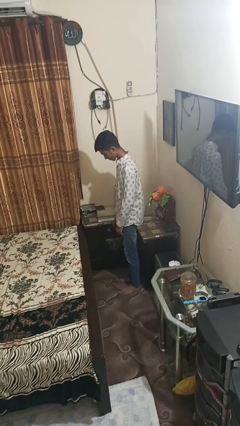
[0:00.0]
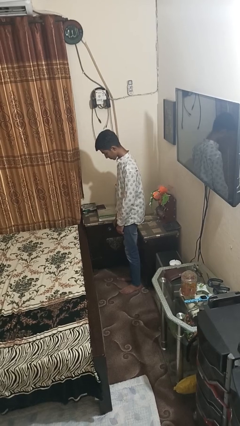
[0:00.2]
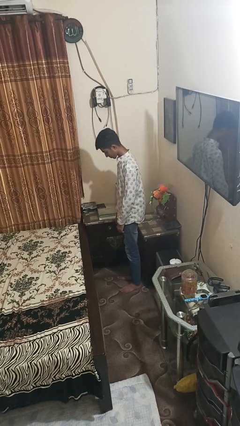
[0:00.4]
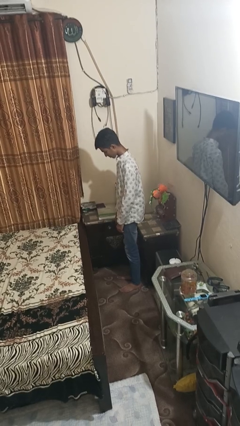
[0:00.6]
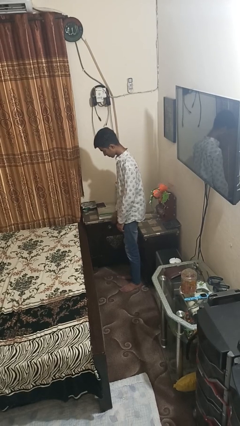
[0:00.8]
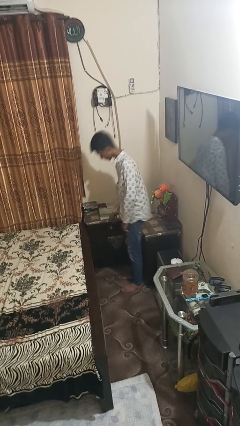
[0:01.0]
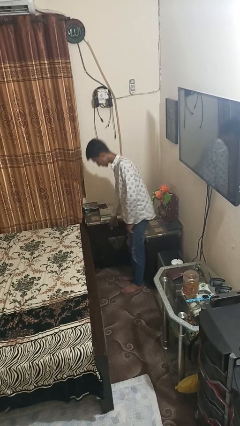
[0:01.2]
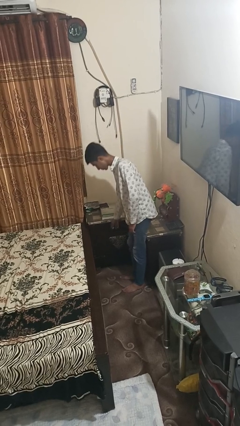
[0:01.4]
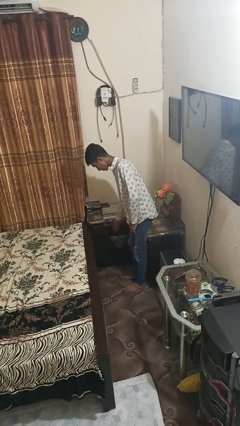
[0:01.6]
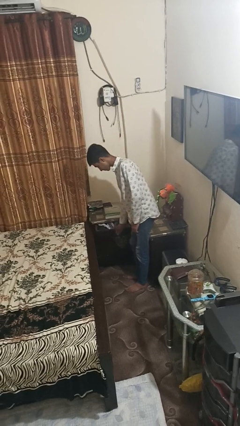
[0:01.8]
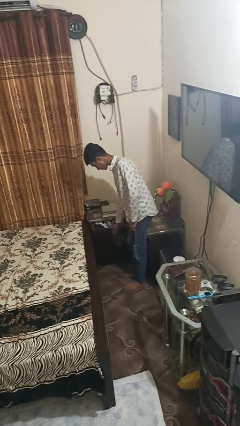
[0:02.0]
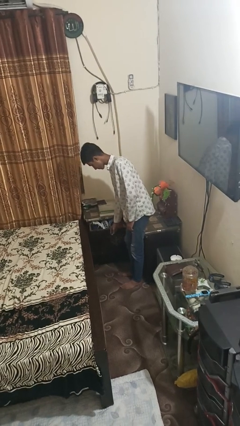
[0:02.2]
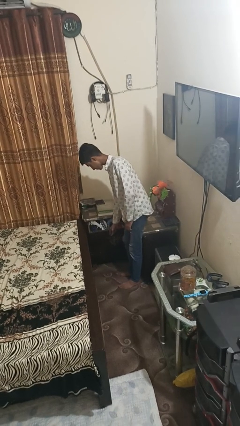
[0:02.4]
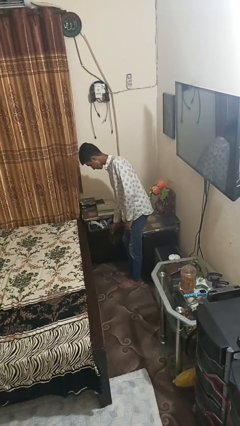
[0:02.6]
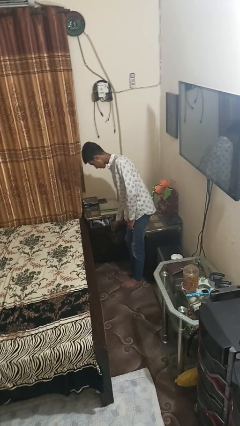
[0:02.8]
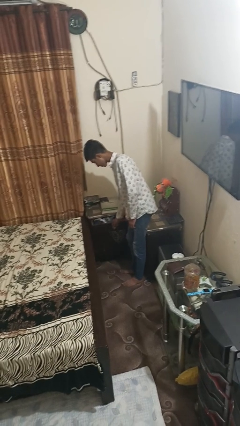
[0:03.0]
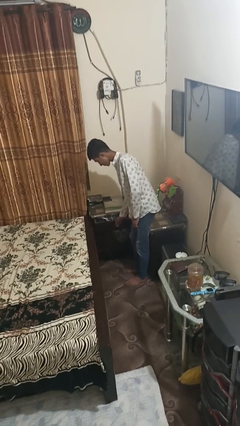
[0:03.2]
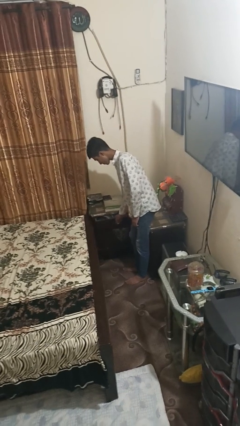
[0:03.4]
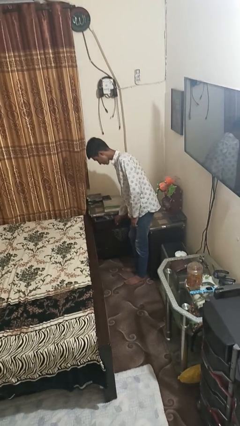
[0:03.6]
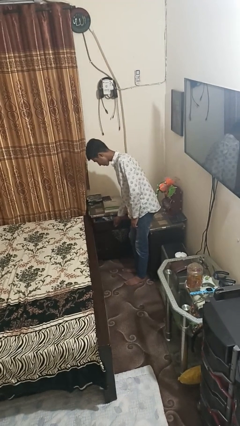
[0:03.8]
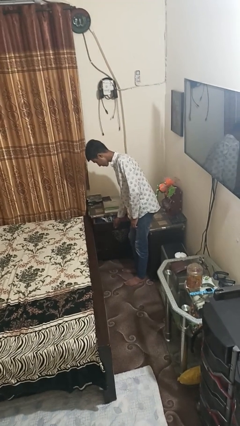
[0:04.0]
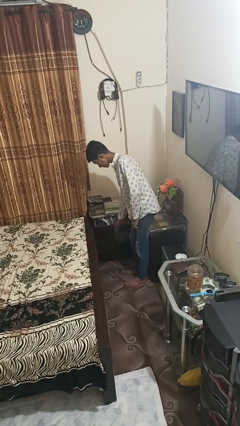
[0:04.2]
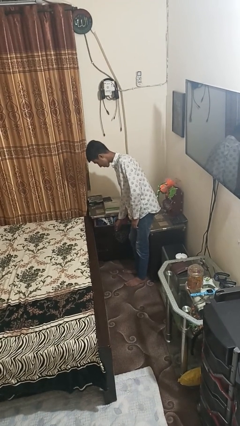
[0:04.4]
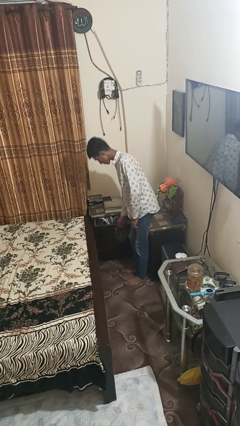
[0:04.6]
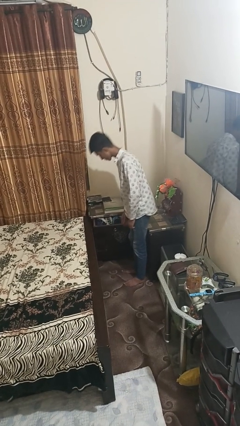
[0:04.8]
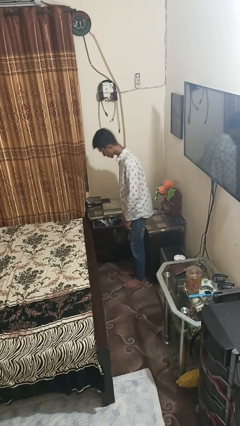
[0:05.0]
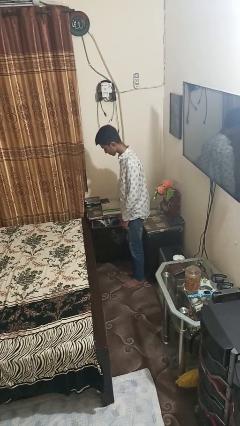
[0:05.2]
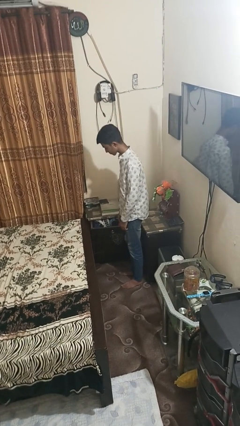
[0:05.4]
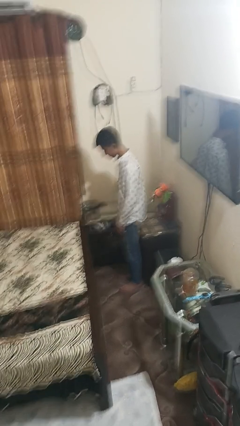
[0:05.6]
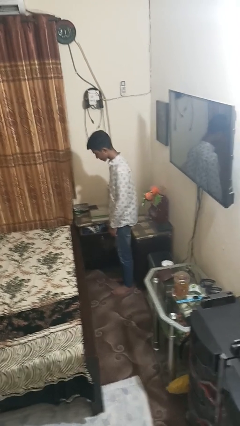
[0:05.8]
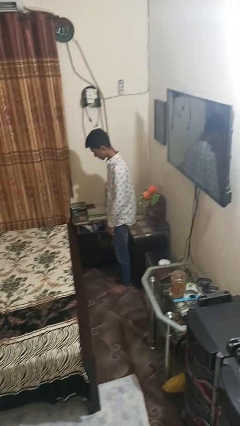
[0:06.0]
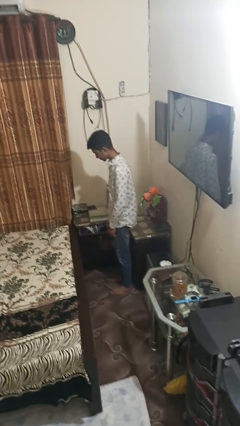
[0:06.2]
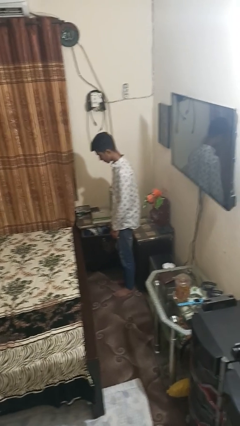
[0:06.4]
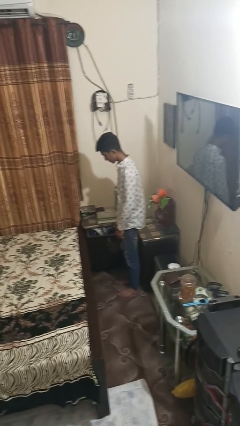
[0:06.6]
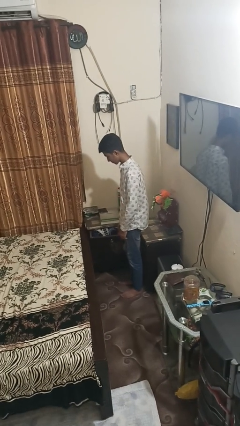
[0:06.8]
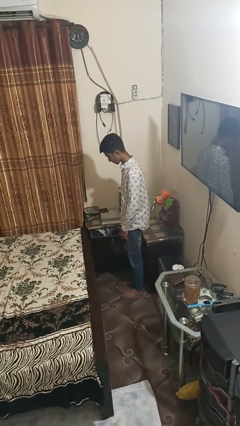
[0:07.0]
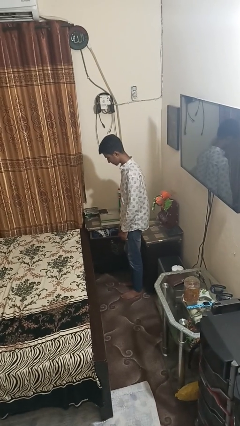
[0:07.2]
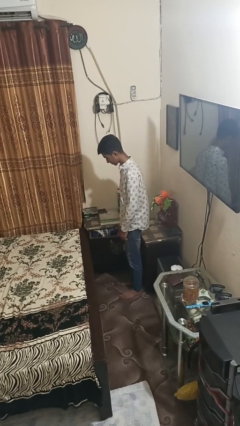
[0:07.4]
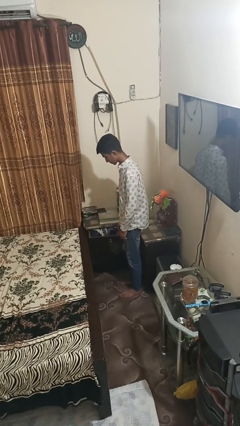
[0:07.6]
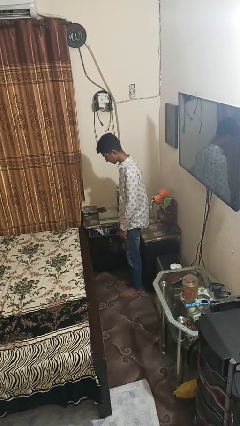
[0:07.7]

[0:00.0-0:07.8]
person opens dresser drawer

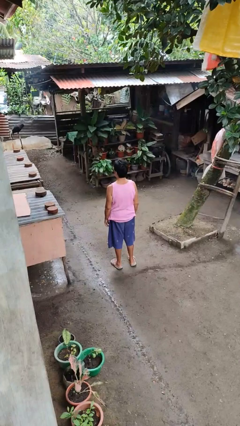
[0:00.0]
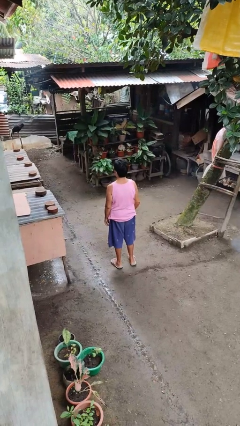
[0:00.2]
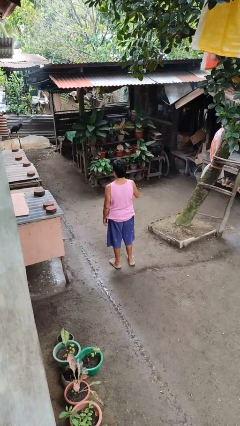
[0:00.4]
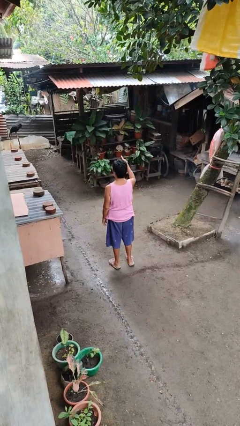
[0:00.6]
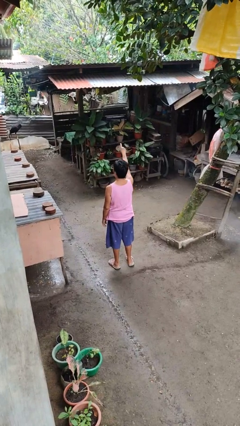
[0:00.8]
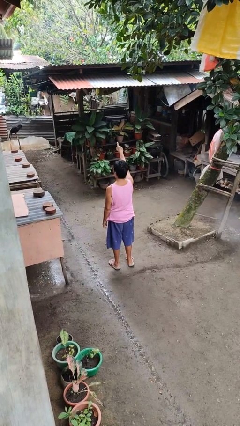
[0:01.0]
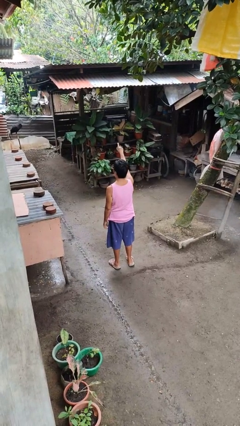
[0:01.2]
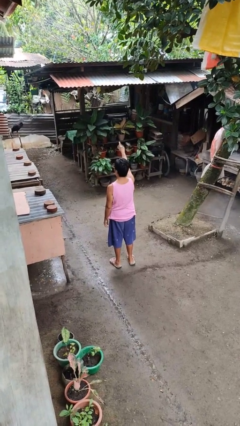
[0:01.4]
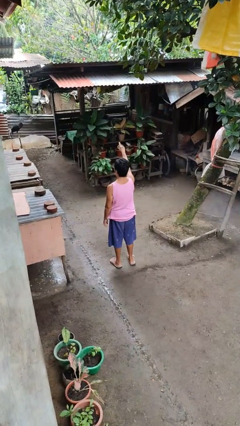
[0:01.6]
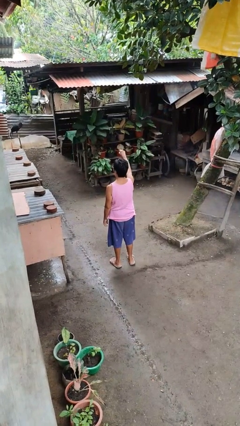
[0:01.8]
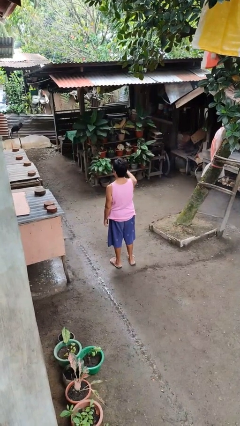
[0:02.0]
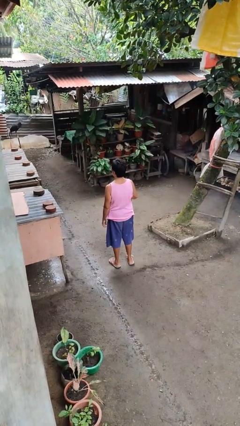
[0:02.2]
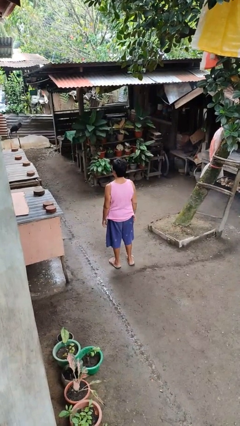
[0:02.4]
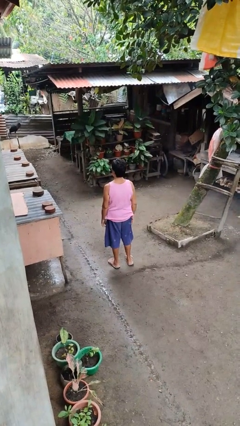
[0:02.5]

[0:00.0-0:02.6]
person points at person

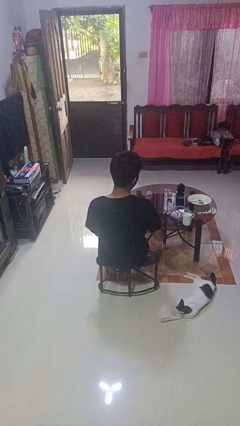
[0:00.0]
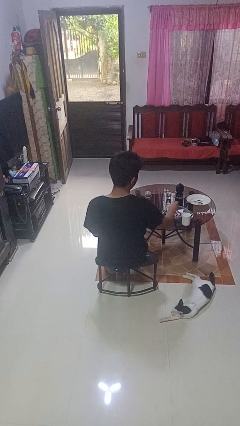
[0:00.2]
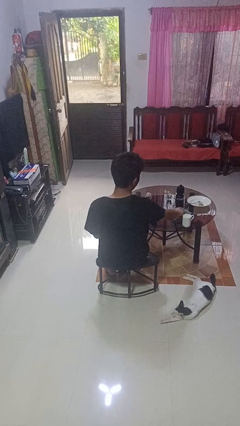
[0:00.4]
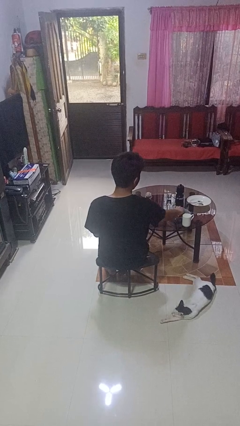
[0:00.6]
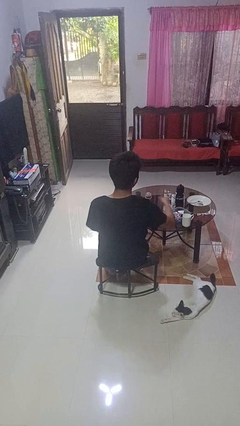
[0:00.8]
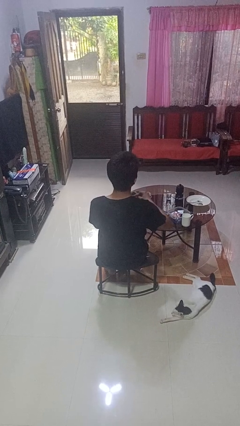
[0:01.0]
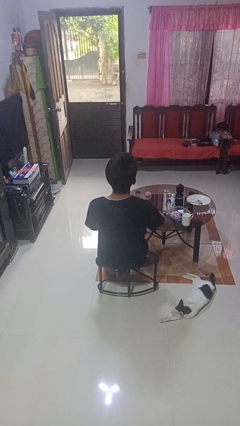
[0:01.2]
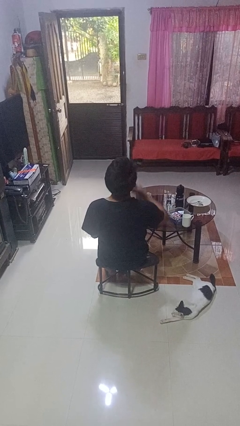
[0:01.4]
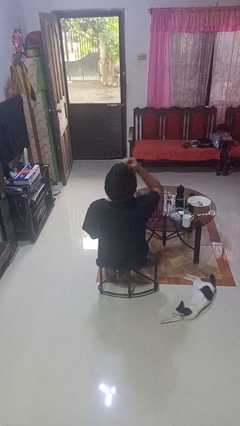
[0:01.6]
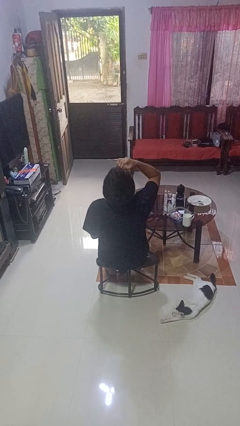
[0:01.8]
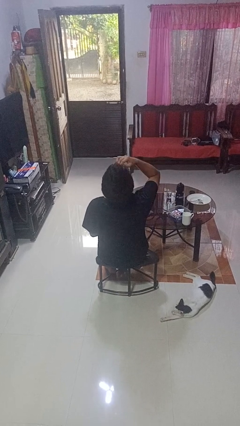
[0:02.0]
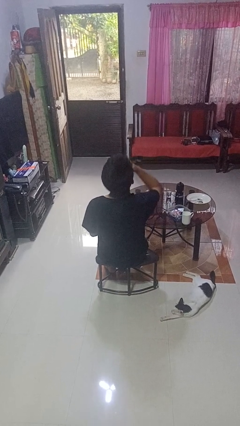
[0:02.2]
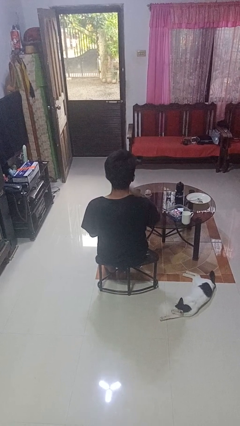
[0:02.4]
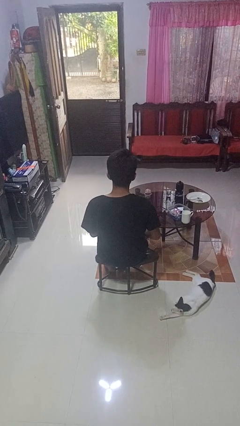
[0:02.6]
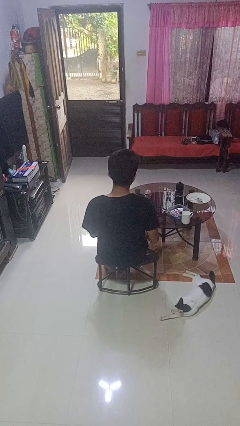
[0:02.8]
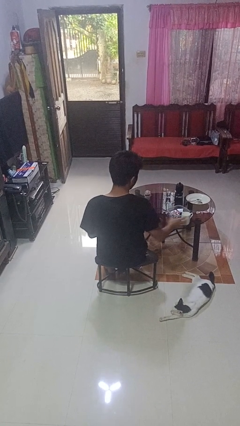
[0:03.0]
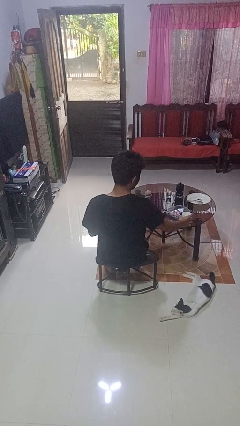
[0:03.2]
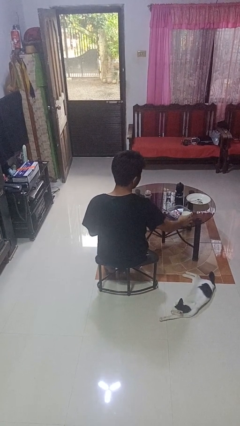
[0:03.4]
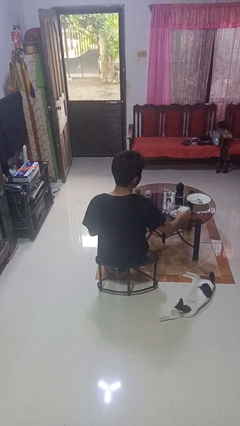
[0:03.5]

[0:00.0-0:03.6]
person takes medicine pills

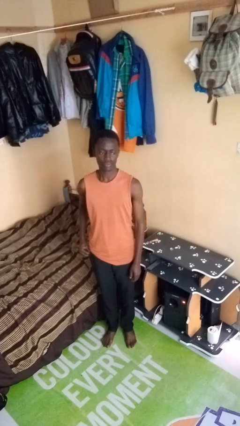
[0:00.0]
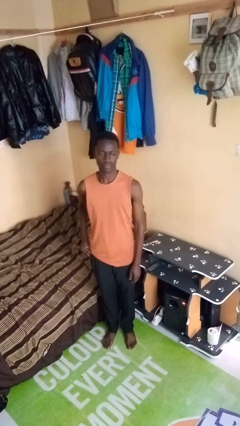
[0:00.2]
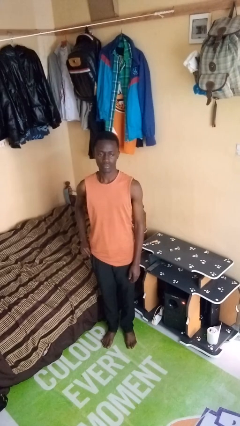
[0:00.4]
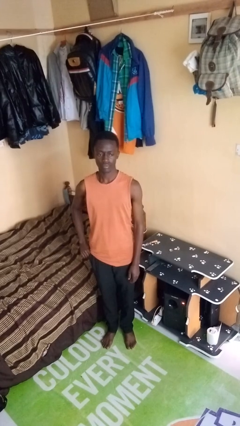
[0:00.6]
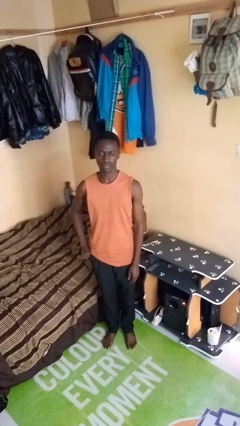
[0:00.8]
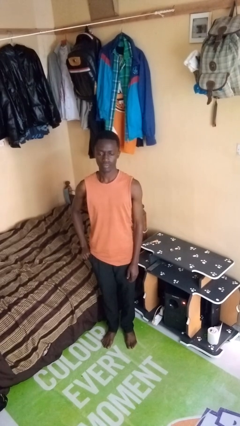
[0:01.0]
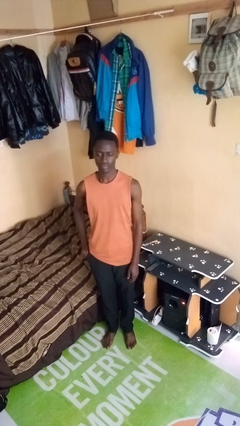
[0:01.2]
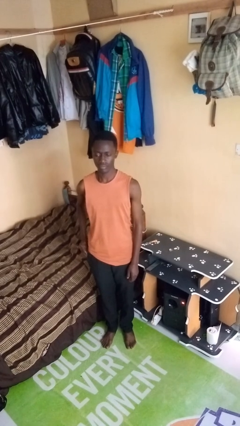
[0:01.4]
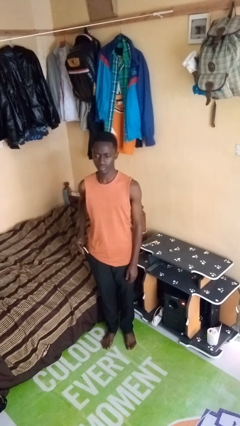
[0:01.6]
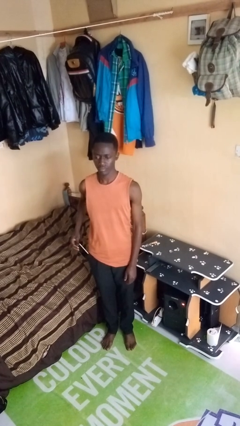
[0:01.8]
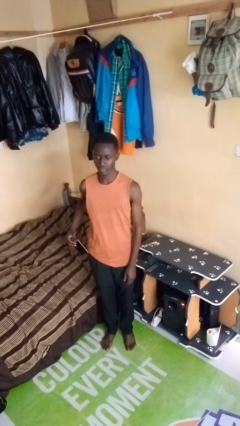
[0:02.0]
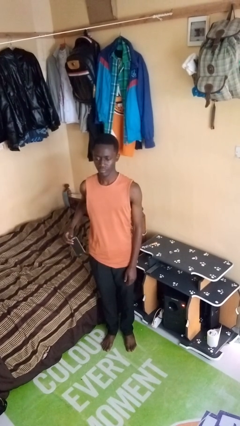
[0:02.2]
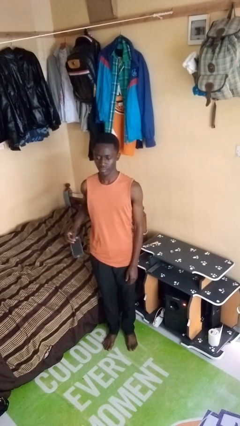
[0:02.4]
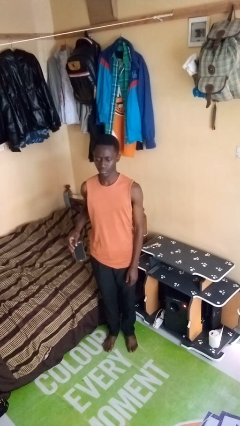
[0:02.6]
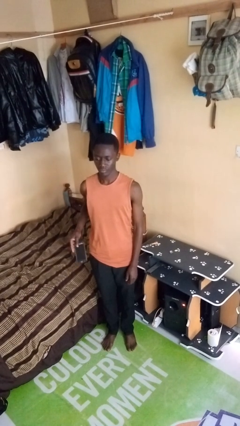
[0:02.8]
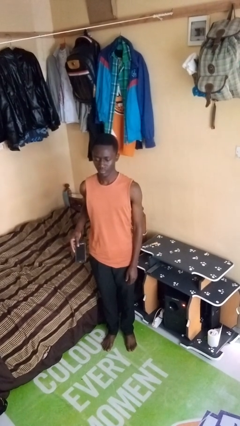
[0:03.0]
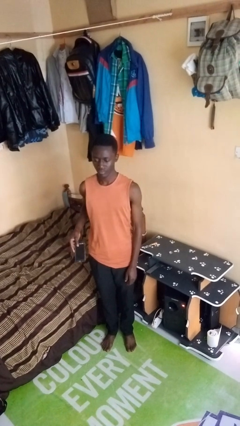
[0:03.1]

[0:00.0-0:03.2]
person takes phone from pocket

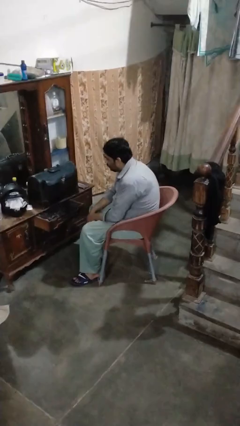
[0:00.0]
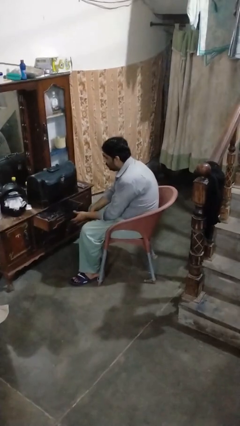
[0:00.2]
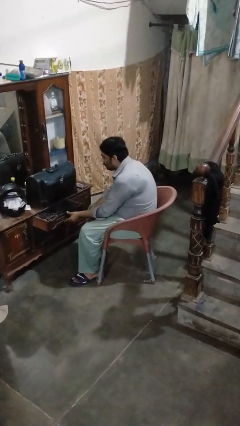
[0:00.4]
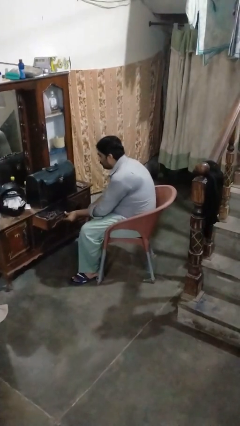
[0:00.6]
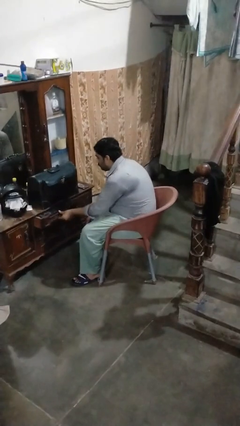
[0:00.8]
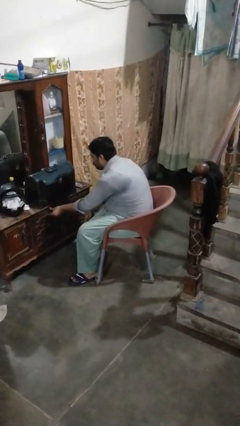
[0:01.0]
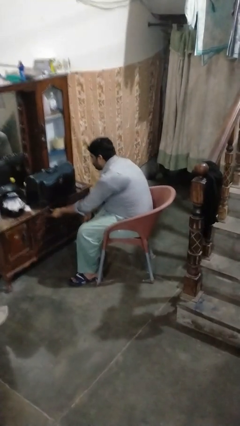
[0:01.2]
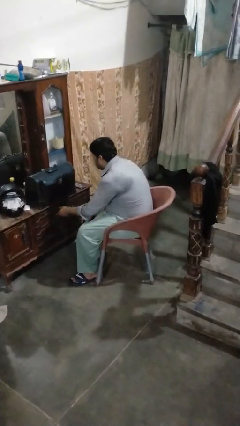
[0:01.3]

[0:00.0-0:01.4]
person closes dresser drawer
